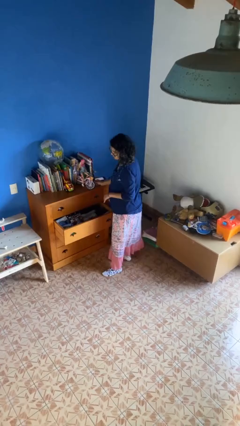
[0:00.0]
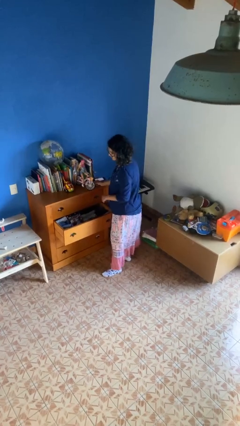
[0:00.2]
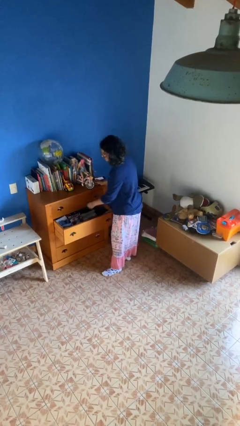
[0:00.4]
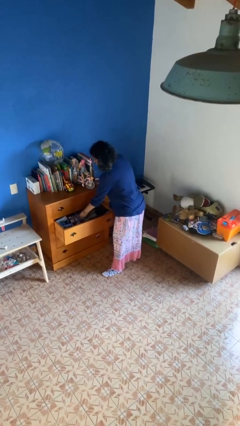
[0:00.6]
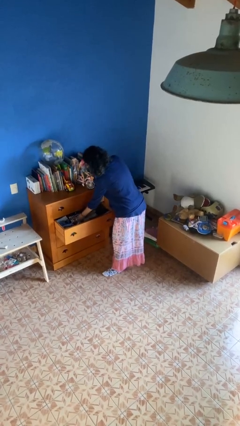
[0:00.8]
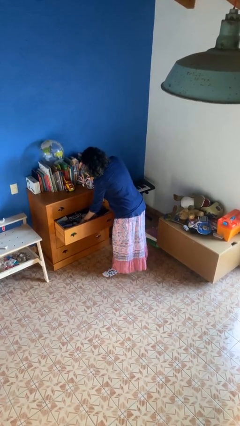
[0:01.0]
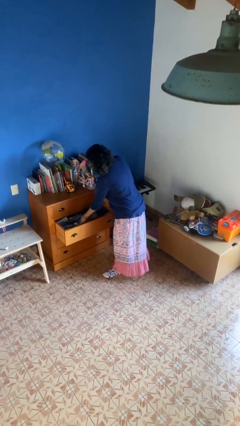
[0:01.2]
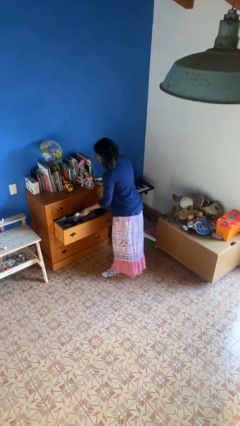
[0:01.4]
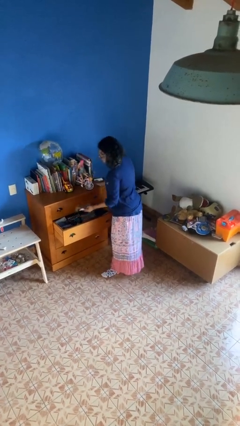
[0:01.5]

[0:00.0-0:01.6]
person takes clothes from dresser

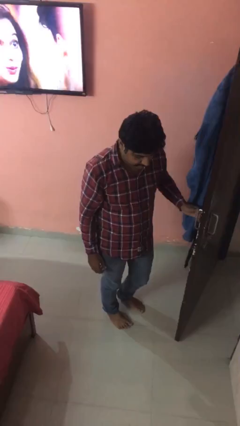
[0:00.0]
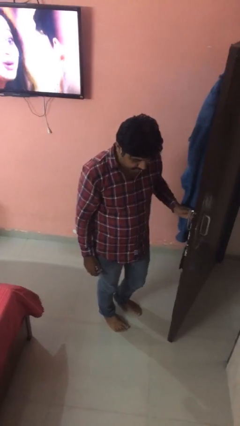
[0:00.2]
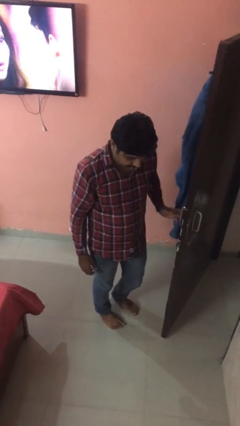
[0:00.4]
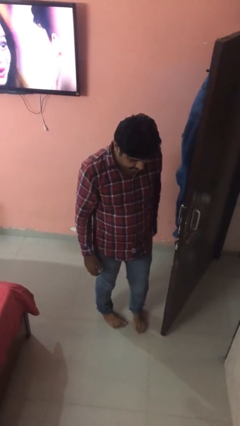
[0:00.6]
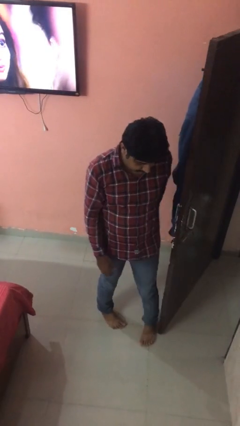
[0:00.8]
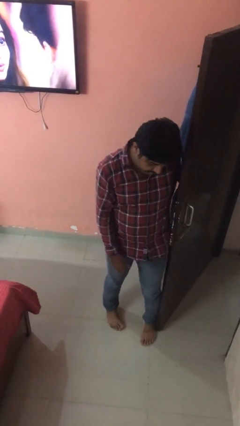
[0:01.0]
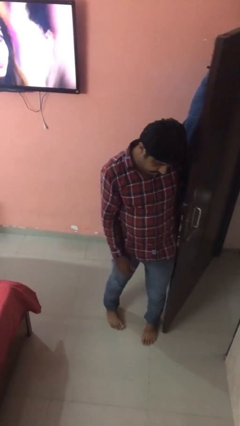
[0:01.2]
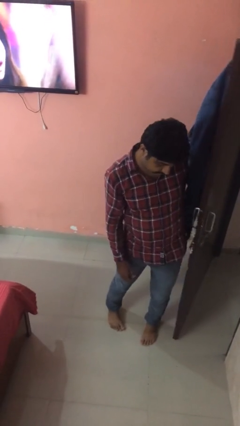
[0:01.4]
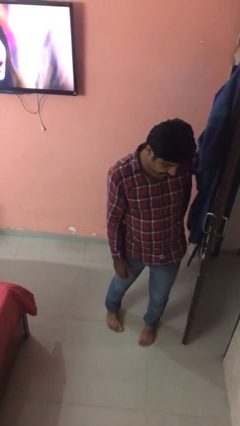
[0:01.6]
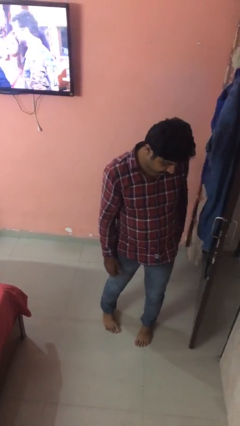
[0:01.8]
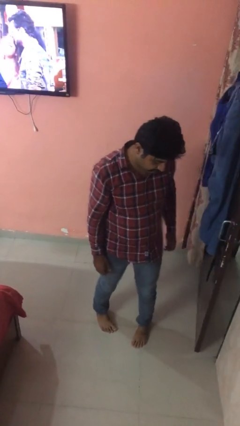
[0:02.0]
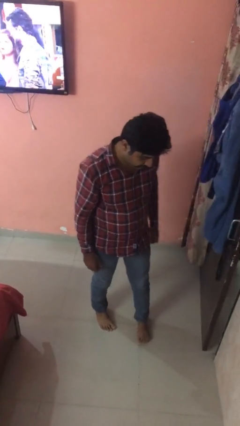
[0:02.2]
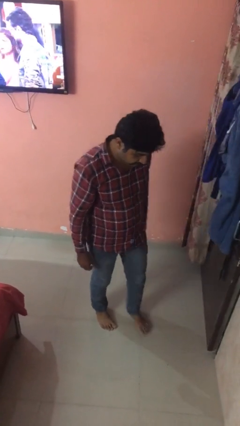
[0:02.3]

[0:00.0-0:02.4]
person closes door with hip

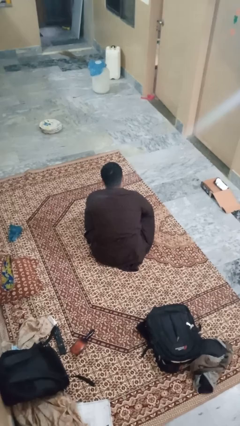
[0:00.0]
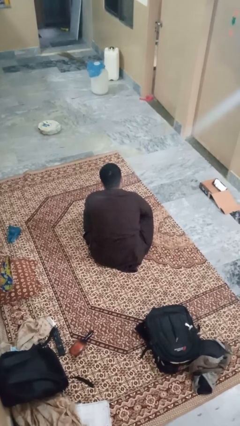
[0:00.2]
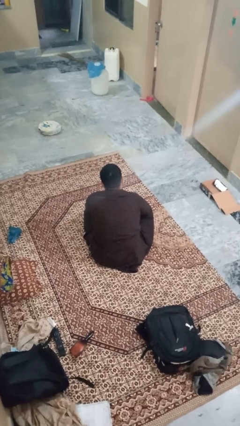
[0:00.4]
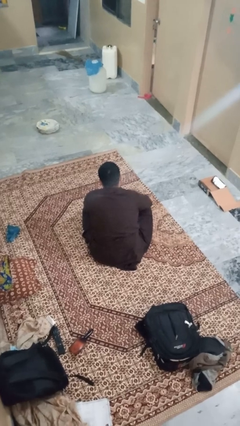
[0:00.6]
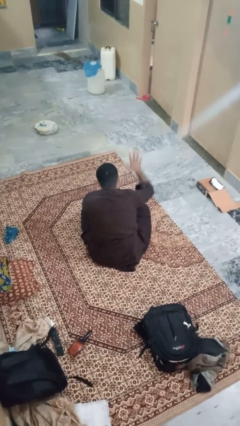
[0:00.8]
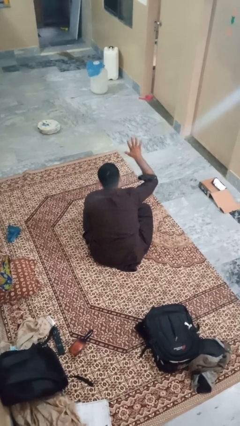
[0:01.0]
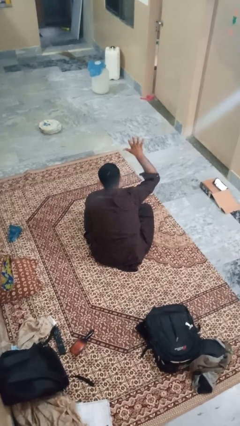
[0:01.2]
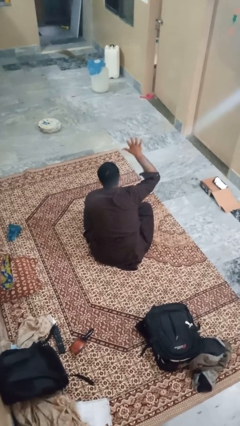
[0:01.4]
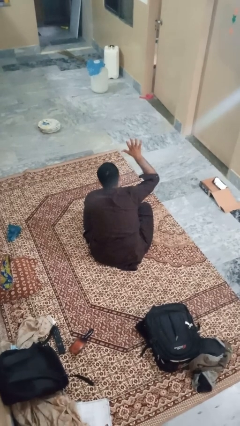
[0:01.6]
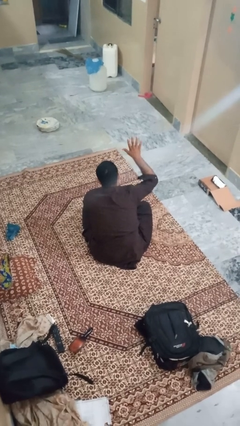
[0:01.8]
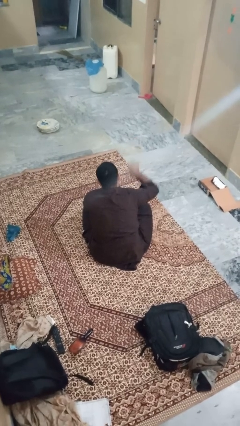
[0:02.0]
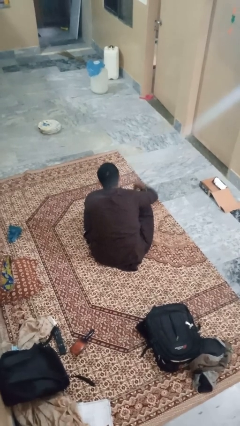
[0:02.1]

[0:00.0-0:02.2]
person gestures number five

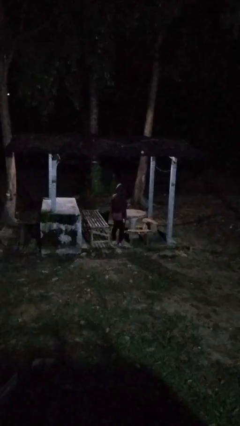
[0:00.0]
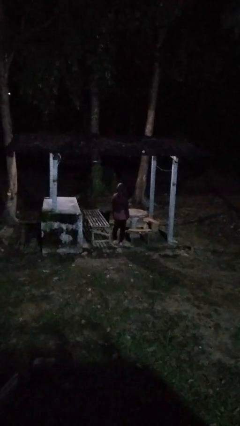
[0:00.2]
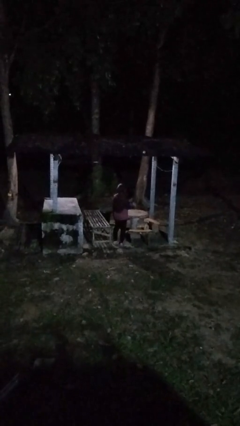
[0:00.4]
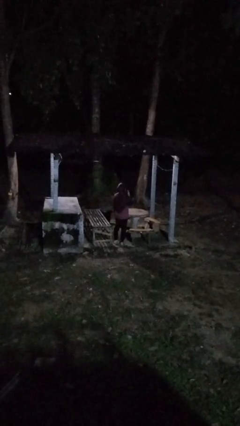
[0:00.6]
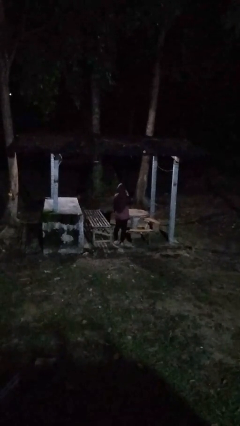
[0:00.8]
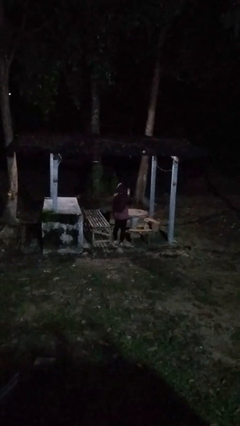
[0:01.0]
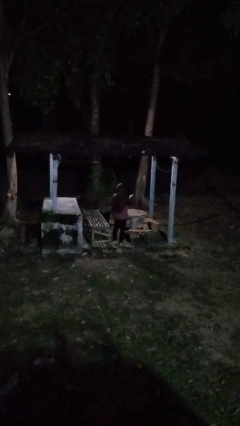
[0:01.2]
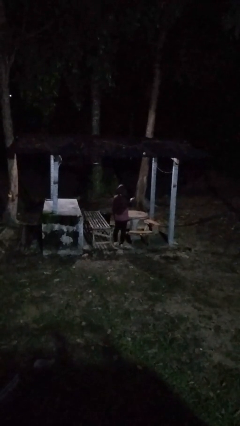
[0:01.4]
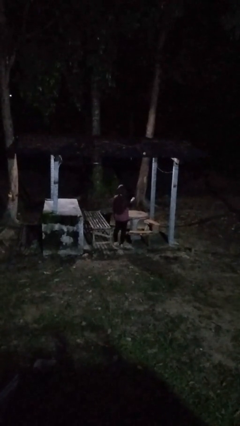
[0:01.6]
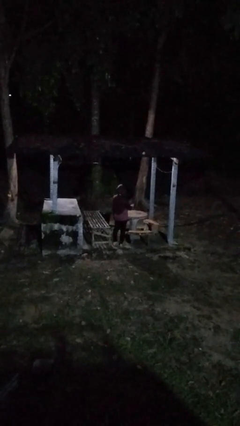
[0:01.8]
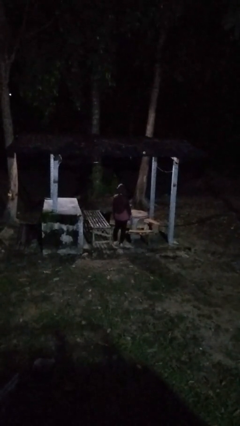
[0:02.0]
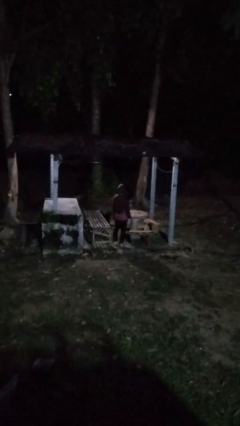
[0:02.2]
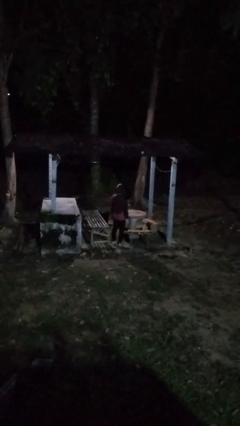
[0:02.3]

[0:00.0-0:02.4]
person gestures blow kiss

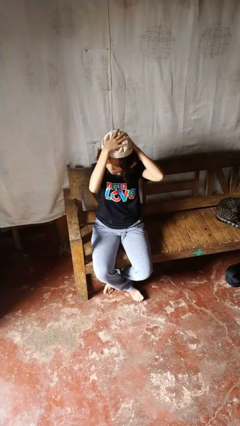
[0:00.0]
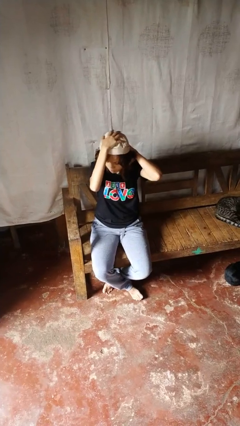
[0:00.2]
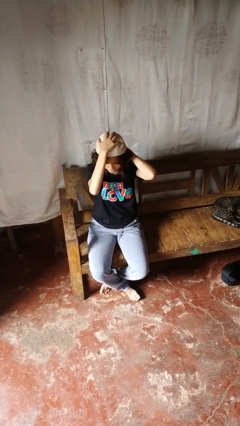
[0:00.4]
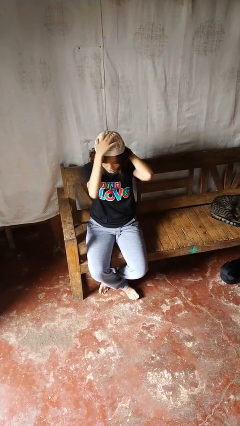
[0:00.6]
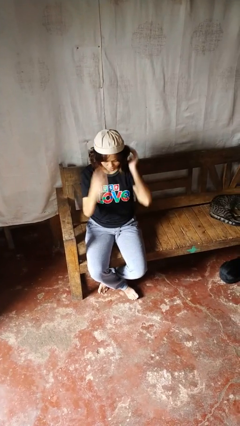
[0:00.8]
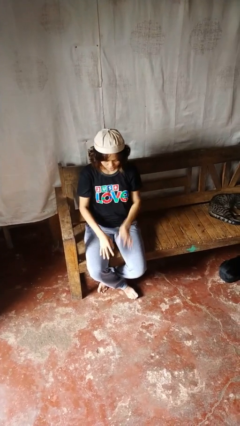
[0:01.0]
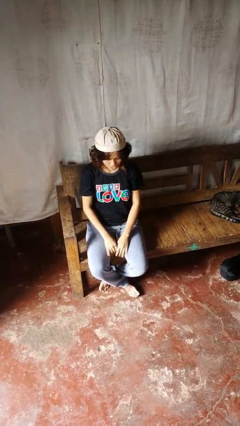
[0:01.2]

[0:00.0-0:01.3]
person puts on hat

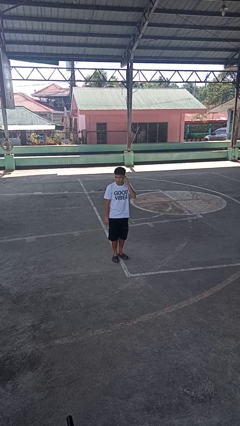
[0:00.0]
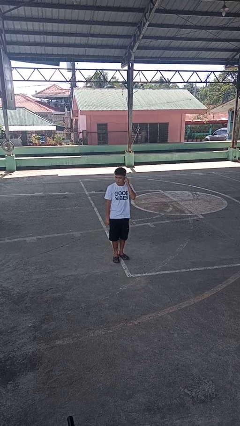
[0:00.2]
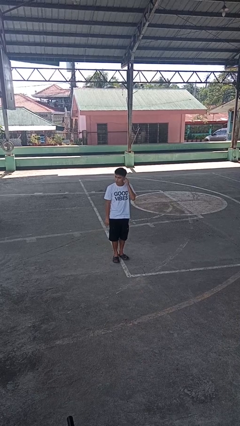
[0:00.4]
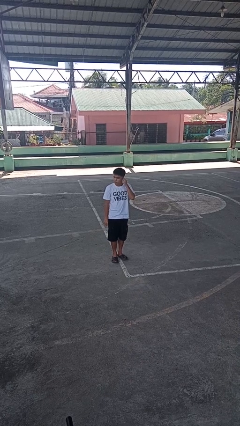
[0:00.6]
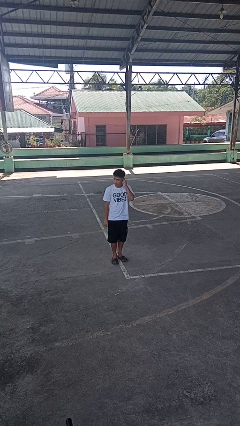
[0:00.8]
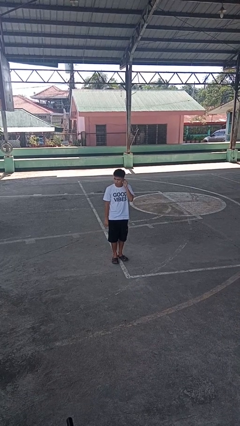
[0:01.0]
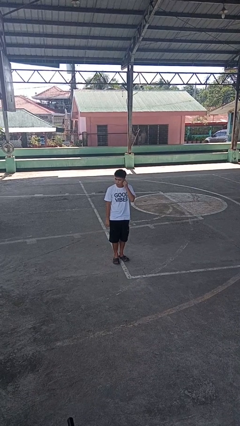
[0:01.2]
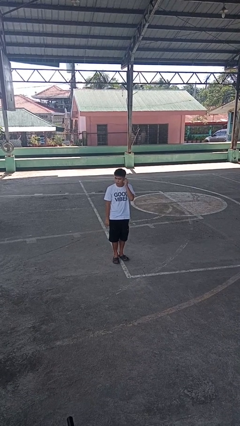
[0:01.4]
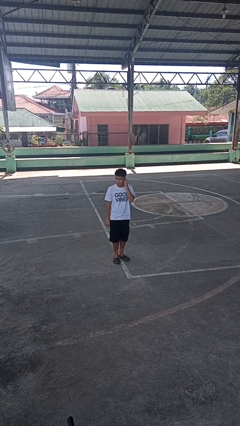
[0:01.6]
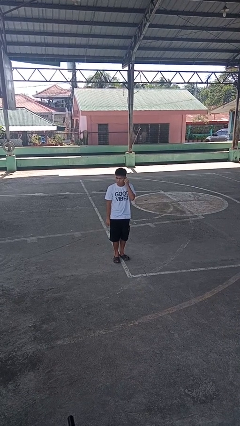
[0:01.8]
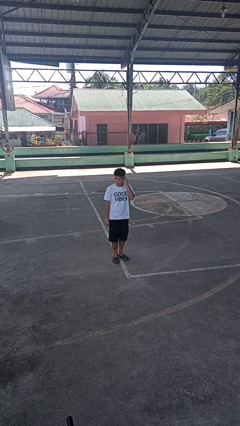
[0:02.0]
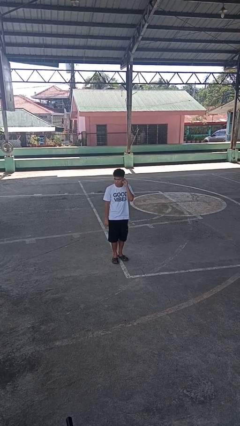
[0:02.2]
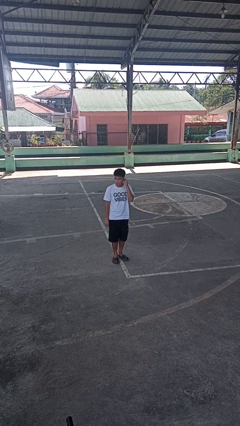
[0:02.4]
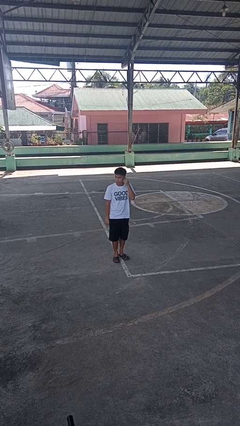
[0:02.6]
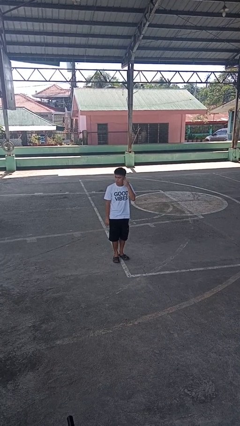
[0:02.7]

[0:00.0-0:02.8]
person touches earlobe

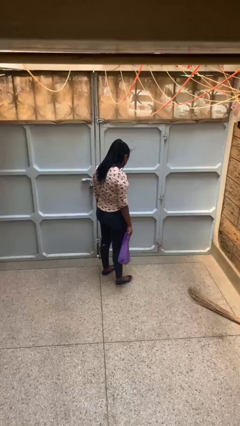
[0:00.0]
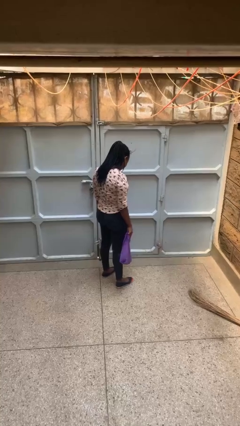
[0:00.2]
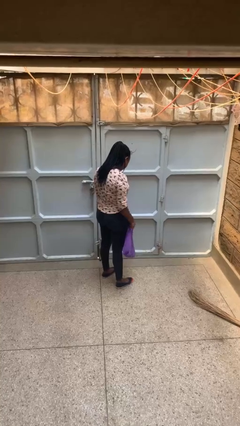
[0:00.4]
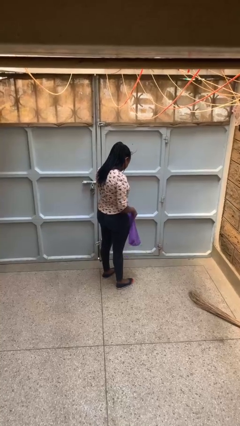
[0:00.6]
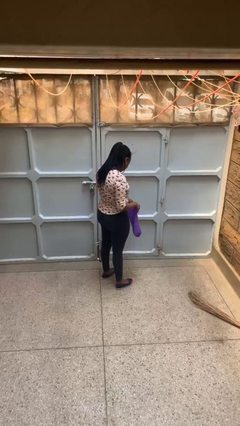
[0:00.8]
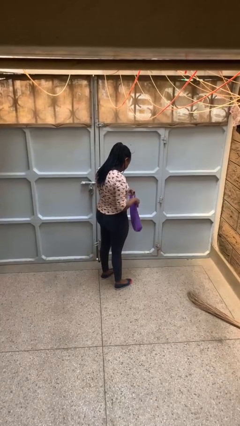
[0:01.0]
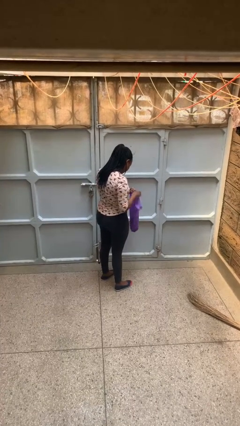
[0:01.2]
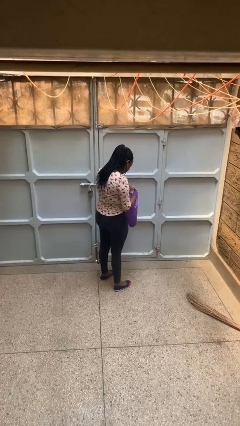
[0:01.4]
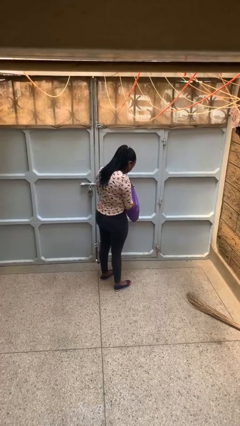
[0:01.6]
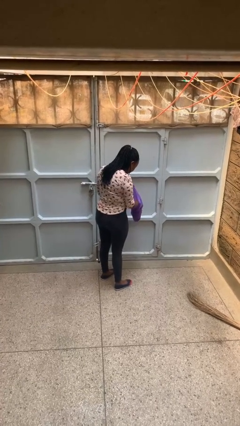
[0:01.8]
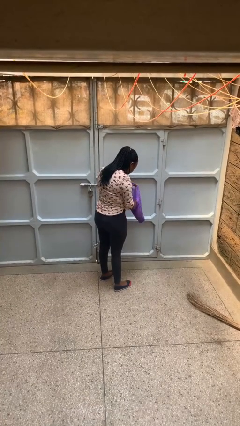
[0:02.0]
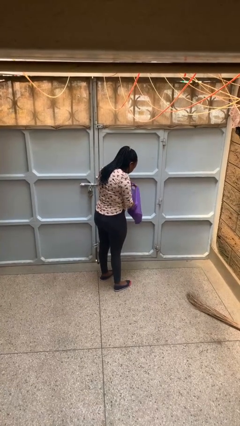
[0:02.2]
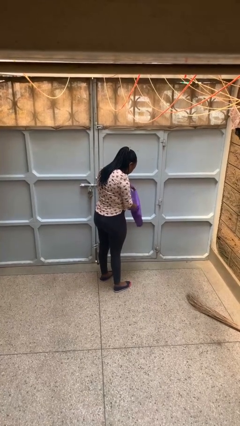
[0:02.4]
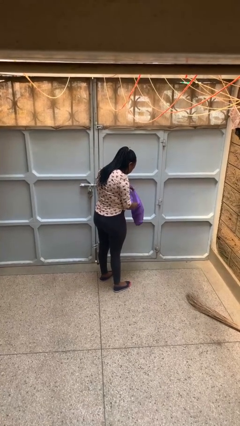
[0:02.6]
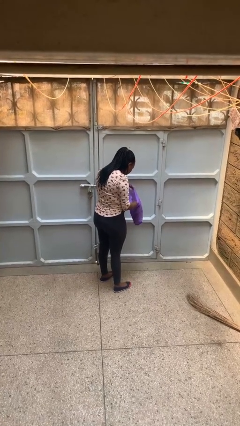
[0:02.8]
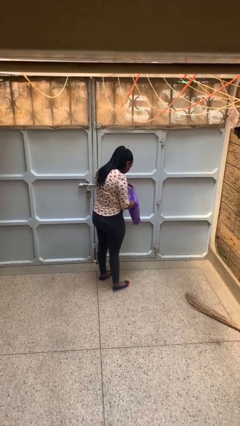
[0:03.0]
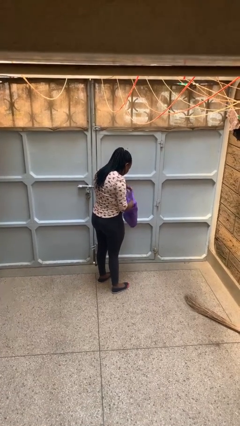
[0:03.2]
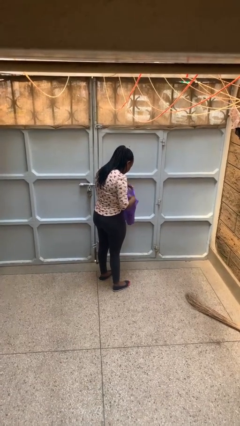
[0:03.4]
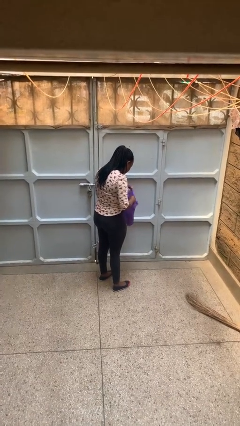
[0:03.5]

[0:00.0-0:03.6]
person searches in bag

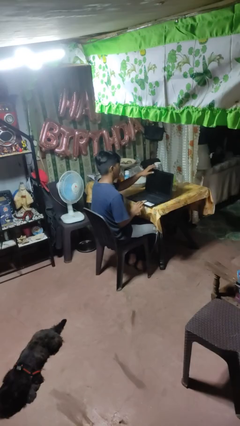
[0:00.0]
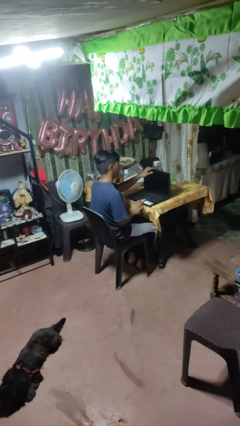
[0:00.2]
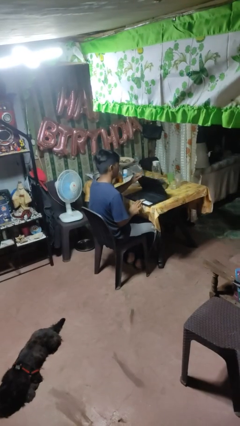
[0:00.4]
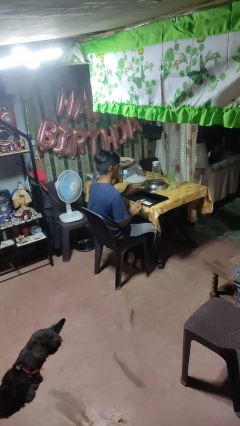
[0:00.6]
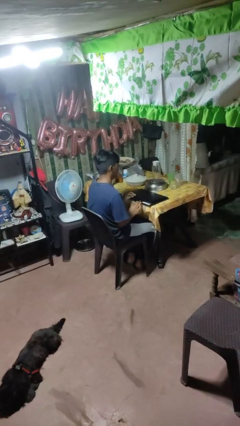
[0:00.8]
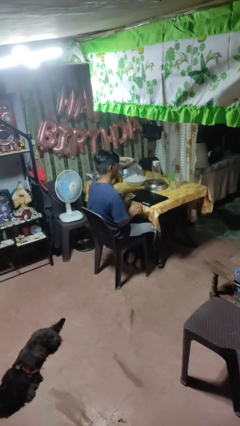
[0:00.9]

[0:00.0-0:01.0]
person closes laptop
